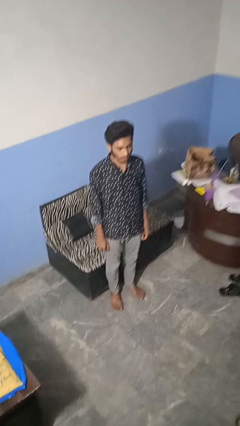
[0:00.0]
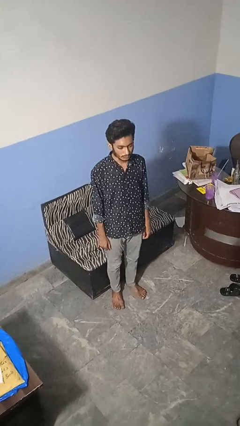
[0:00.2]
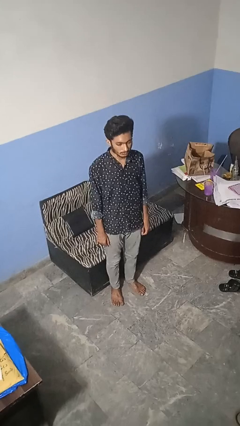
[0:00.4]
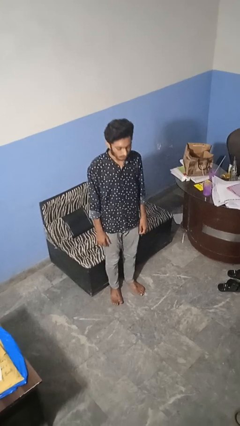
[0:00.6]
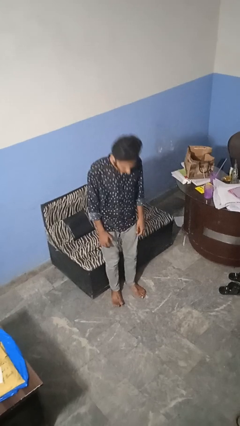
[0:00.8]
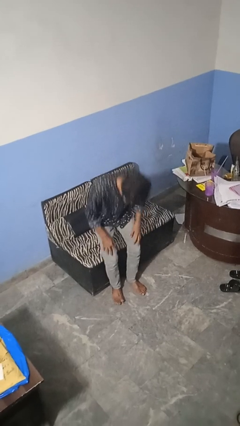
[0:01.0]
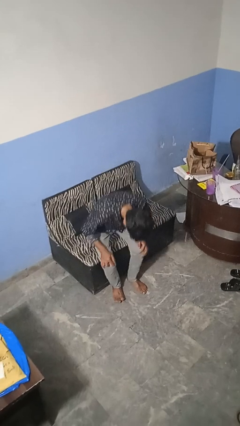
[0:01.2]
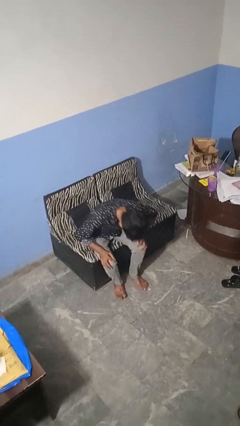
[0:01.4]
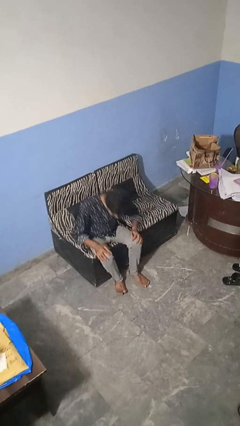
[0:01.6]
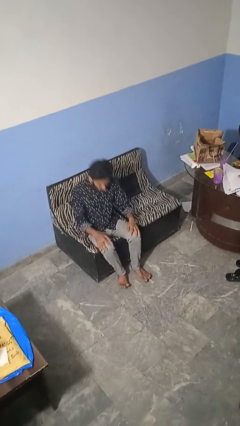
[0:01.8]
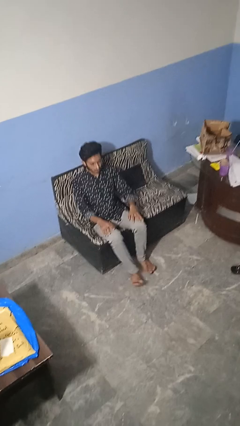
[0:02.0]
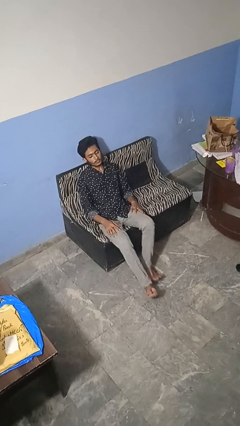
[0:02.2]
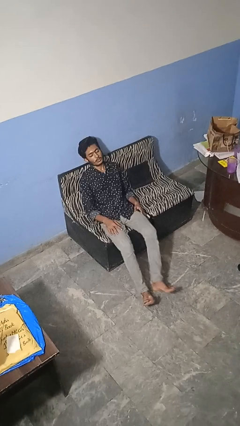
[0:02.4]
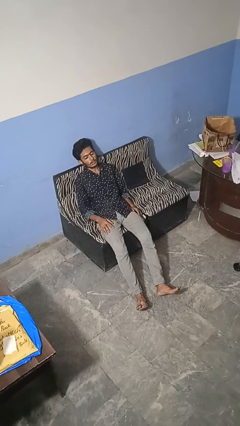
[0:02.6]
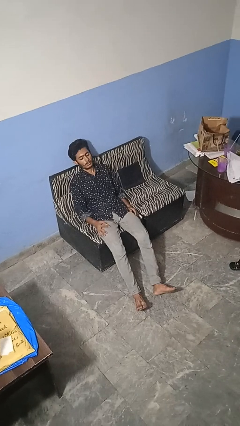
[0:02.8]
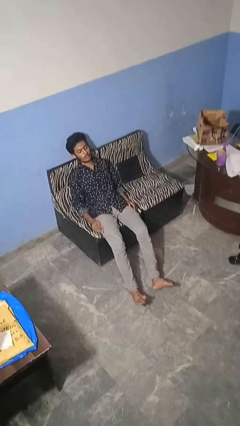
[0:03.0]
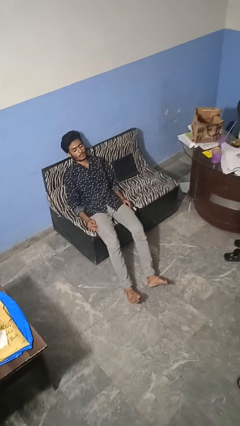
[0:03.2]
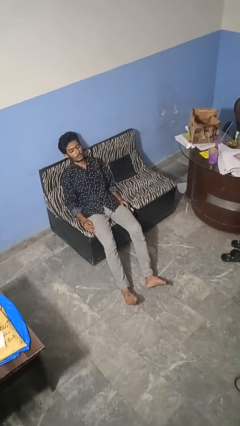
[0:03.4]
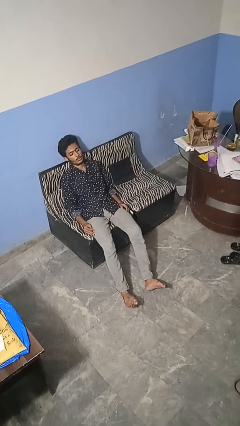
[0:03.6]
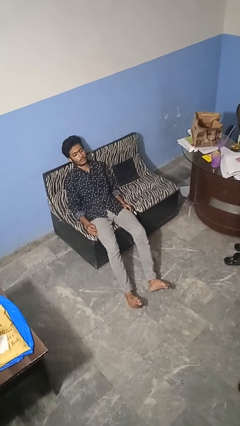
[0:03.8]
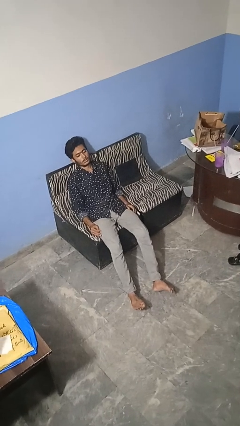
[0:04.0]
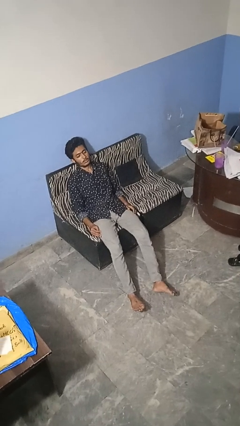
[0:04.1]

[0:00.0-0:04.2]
person lies down on couch

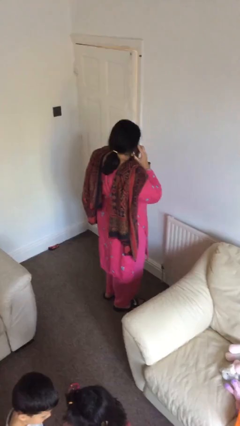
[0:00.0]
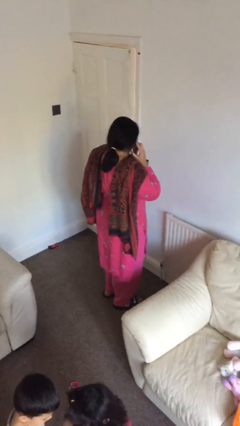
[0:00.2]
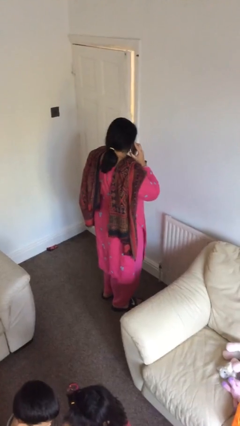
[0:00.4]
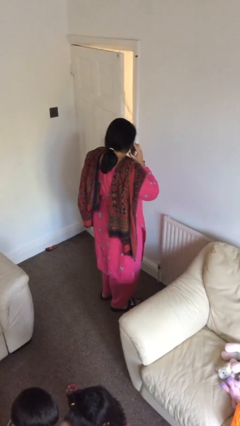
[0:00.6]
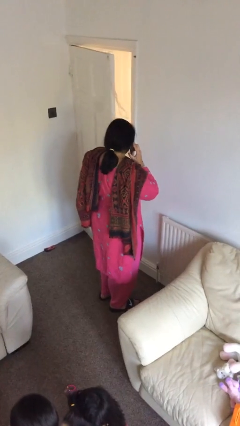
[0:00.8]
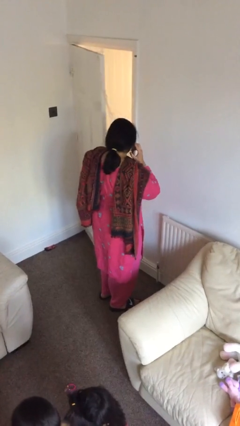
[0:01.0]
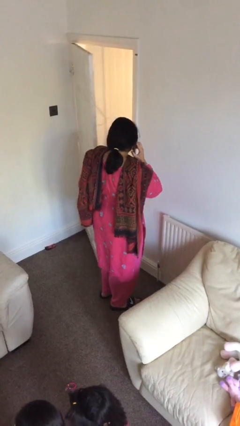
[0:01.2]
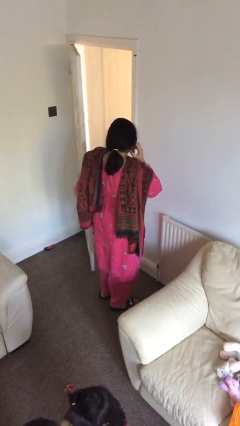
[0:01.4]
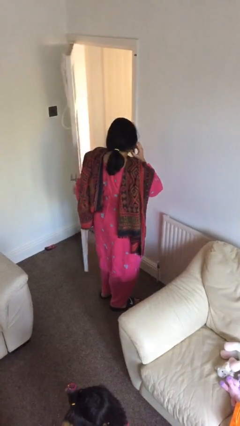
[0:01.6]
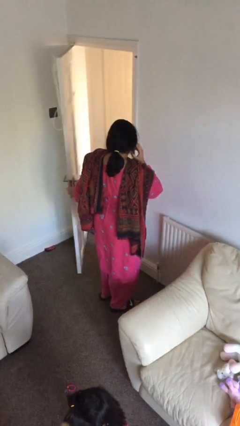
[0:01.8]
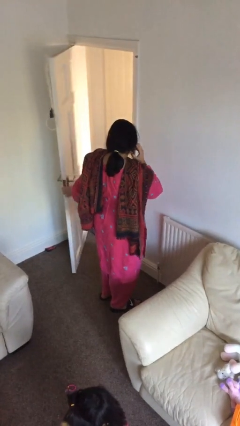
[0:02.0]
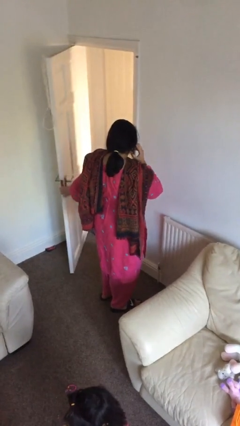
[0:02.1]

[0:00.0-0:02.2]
person opens facility door

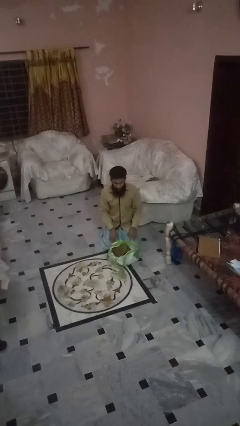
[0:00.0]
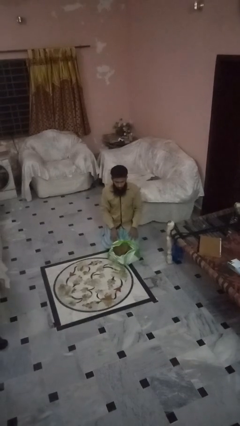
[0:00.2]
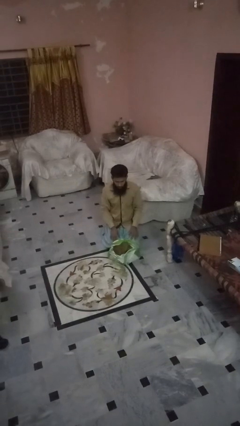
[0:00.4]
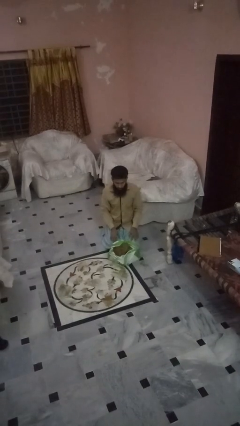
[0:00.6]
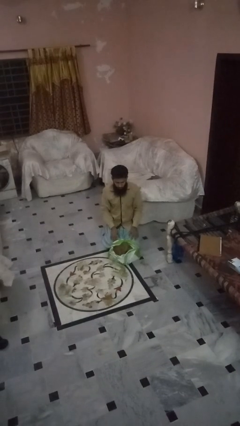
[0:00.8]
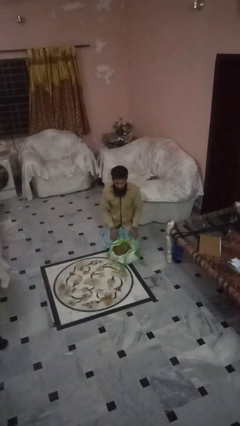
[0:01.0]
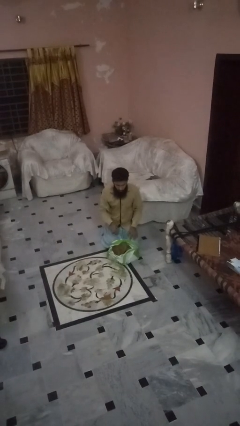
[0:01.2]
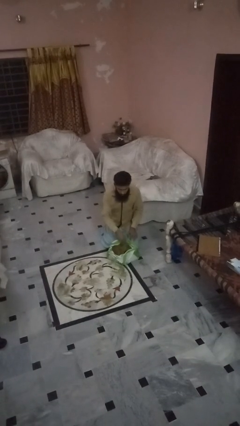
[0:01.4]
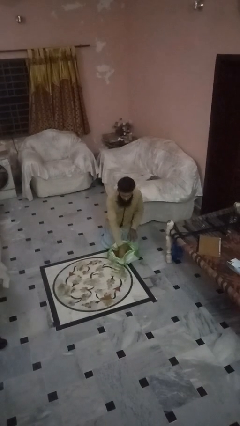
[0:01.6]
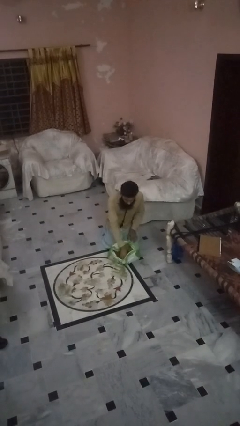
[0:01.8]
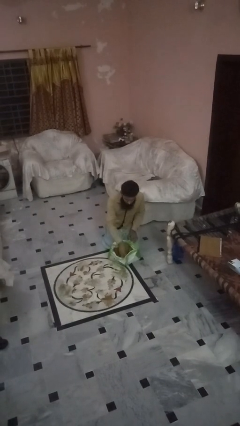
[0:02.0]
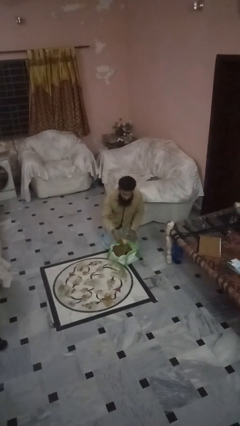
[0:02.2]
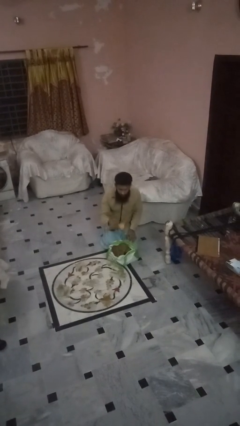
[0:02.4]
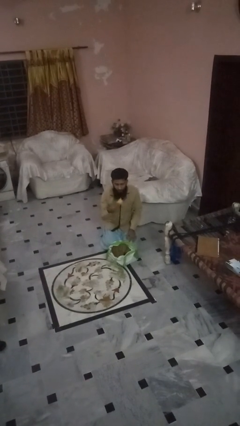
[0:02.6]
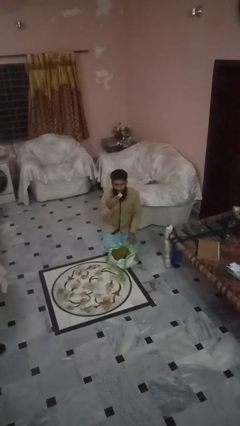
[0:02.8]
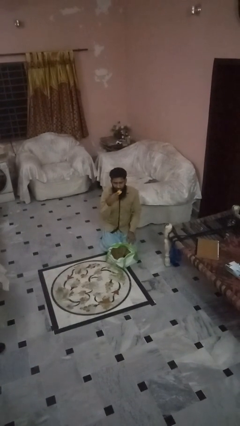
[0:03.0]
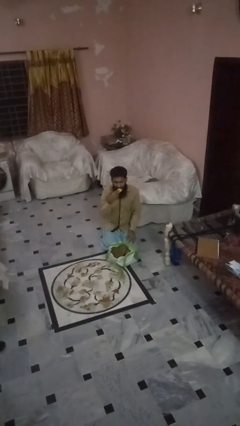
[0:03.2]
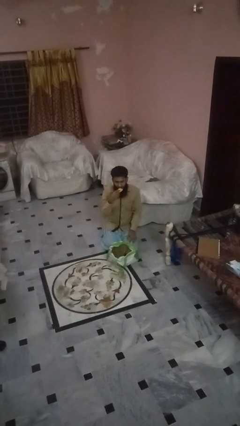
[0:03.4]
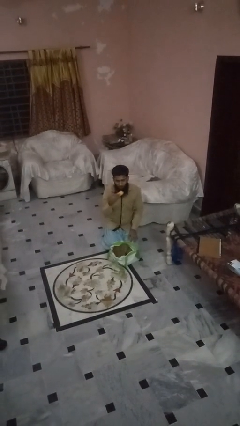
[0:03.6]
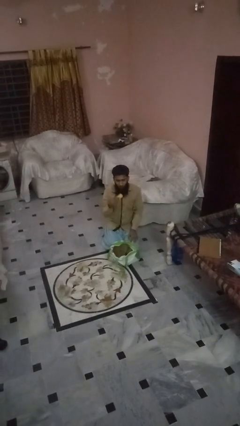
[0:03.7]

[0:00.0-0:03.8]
person eats snack from bag

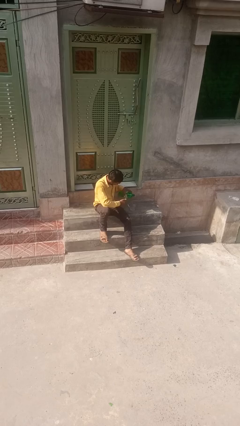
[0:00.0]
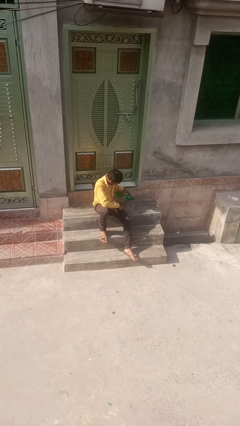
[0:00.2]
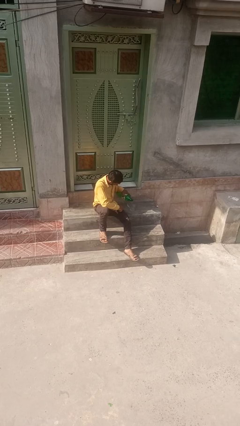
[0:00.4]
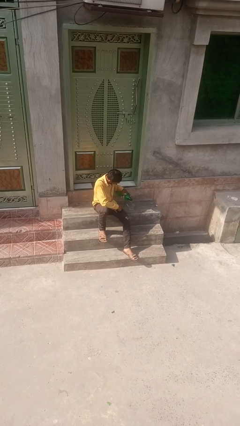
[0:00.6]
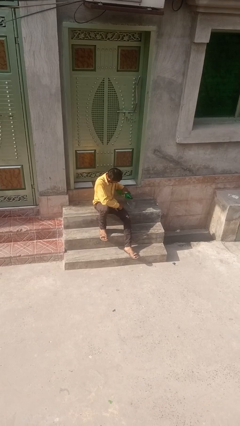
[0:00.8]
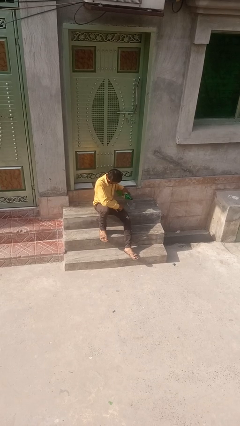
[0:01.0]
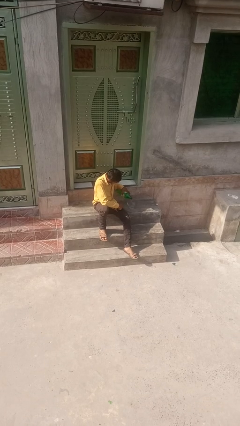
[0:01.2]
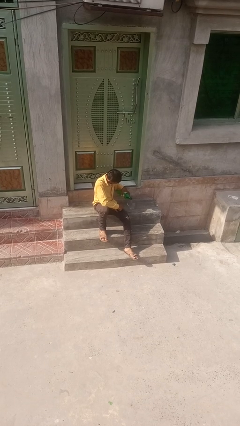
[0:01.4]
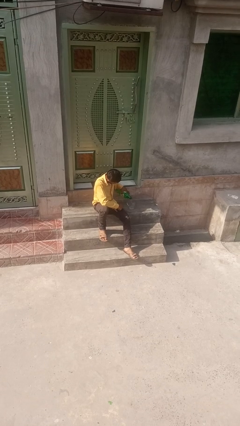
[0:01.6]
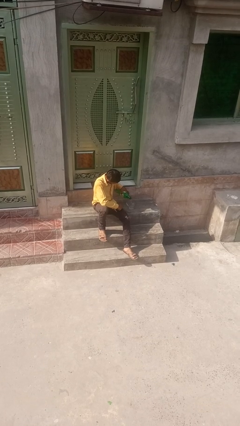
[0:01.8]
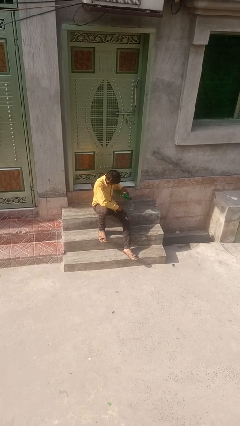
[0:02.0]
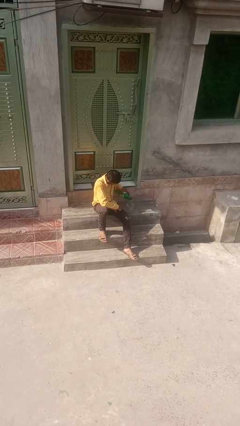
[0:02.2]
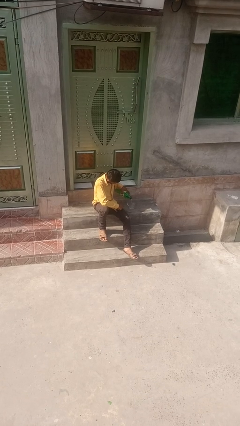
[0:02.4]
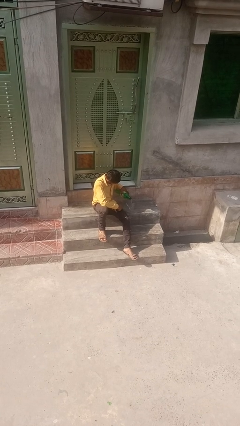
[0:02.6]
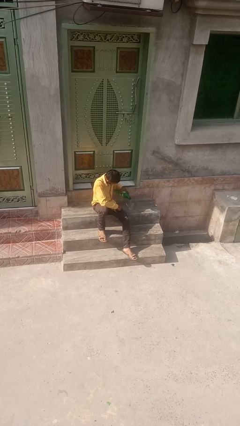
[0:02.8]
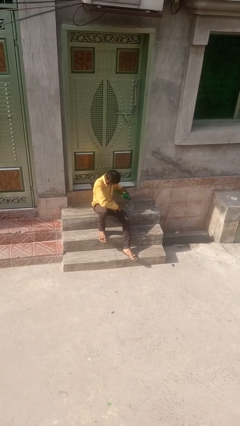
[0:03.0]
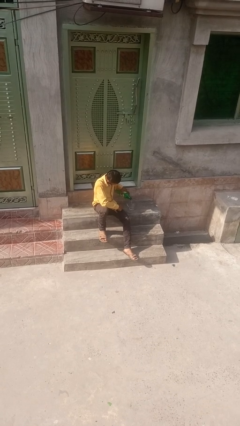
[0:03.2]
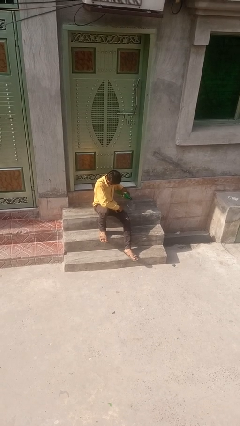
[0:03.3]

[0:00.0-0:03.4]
person pours liquid into cup

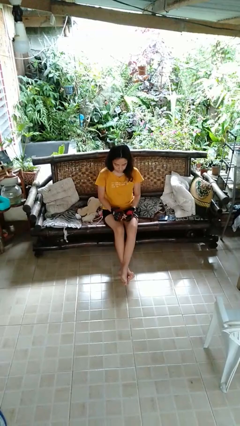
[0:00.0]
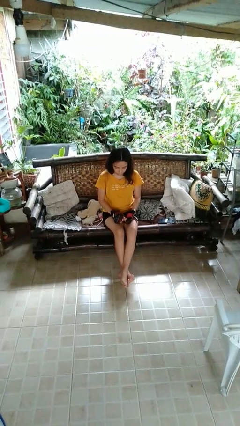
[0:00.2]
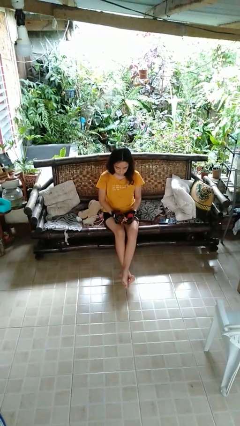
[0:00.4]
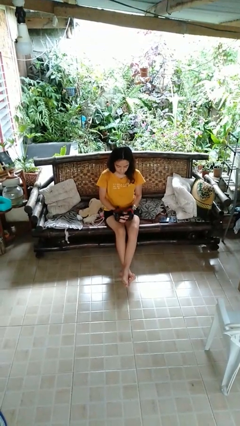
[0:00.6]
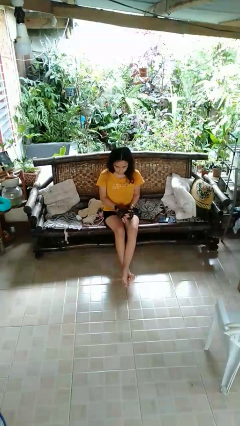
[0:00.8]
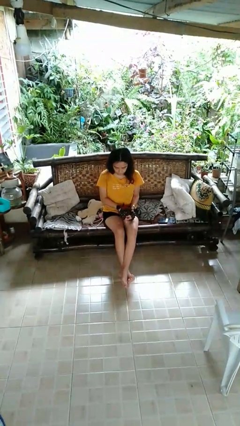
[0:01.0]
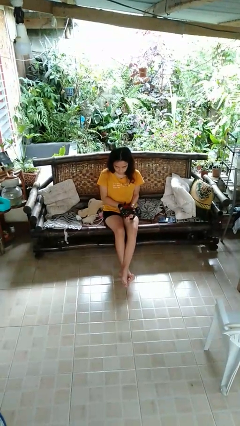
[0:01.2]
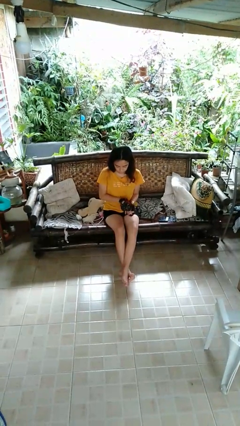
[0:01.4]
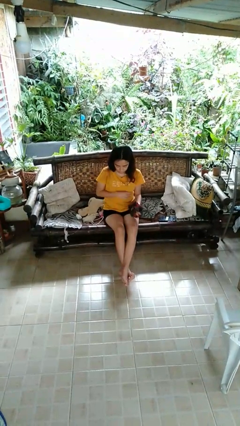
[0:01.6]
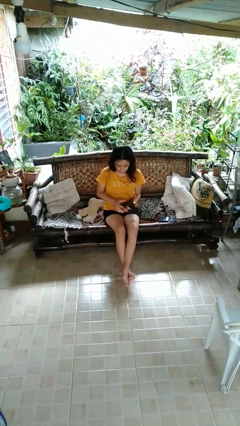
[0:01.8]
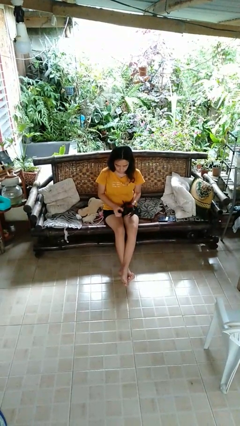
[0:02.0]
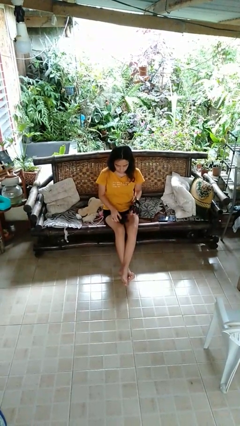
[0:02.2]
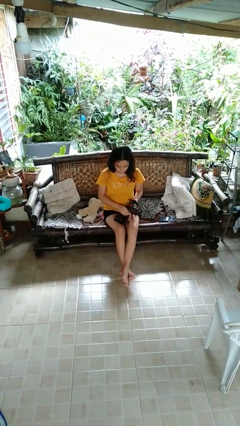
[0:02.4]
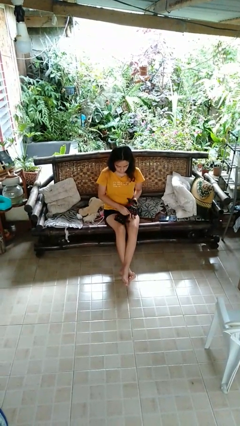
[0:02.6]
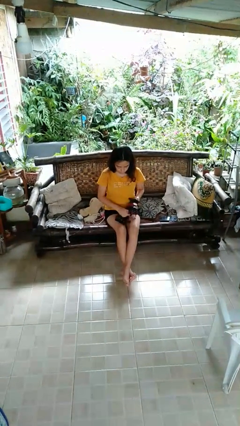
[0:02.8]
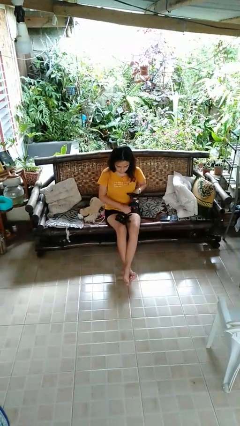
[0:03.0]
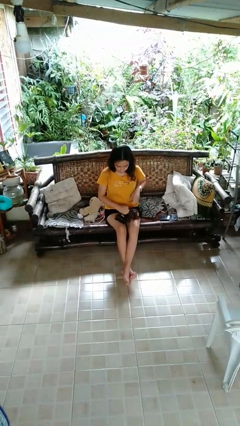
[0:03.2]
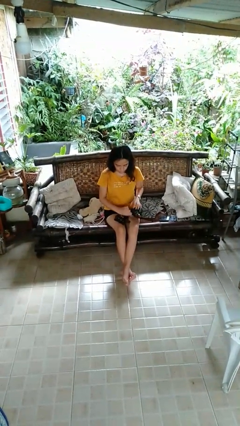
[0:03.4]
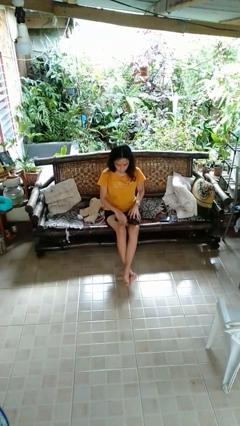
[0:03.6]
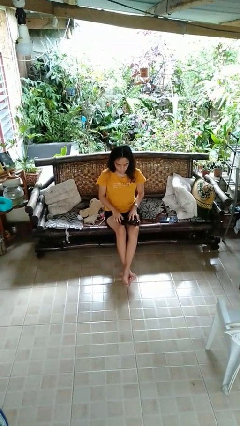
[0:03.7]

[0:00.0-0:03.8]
person takes off gloves
